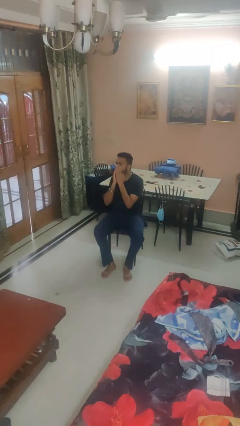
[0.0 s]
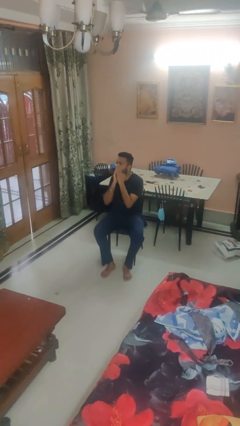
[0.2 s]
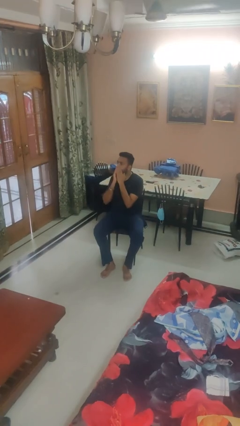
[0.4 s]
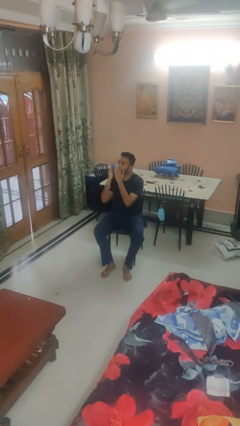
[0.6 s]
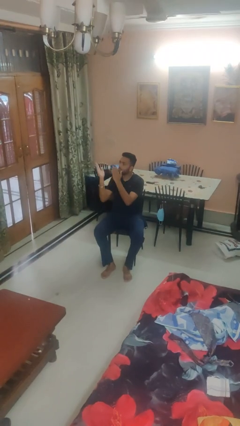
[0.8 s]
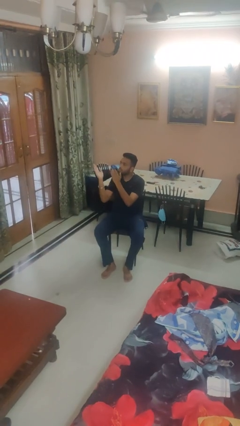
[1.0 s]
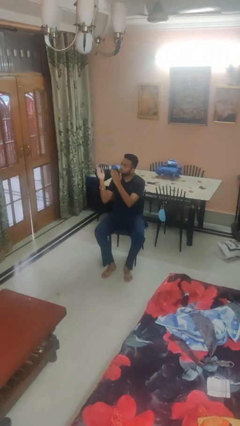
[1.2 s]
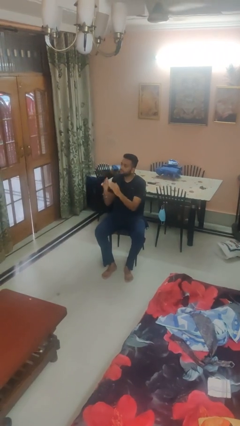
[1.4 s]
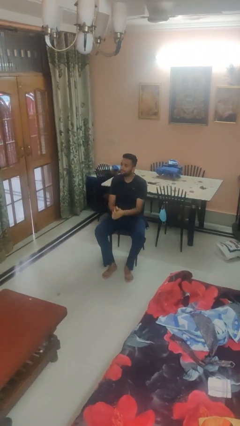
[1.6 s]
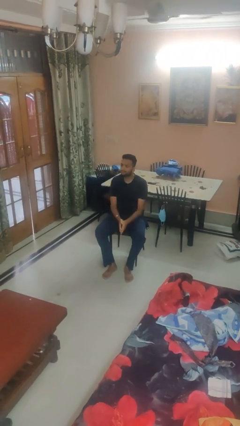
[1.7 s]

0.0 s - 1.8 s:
person gestures blow kiss

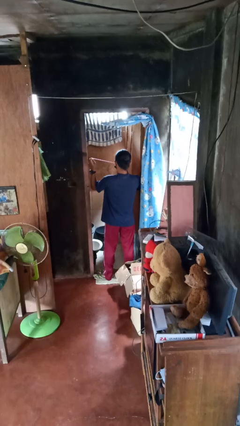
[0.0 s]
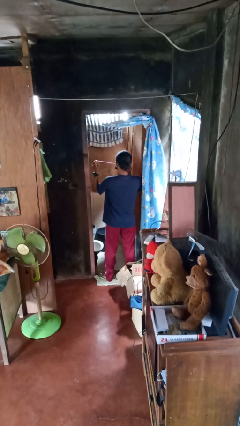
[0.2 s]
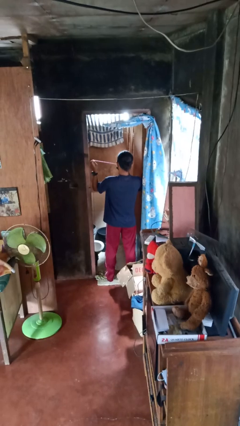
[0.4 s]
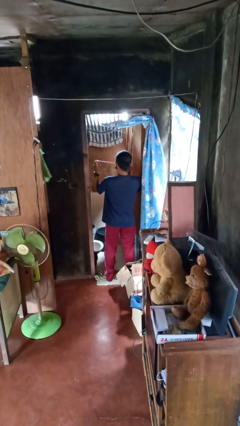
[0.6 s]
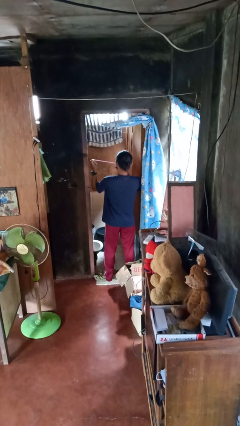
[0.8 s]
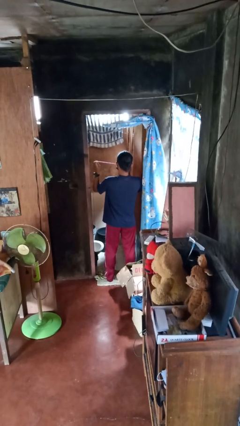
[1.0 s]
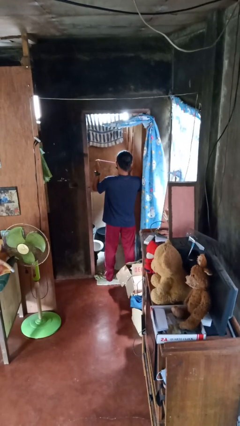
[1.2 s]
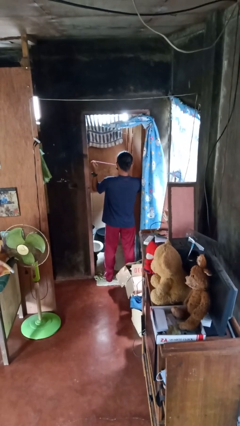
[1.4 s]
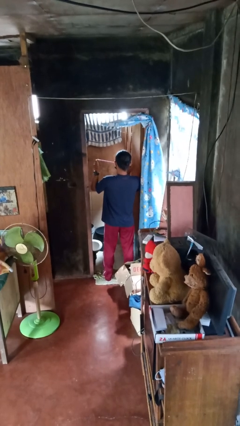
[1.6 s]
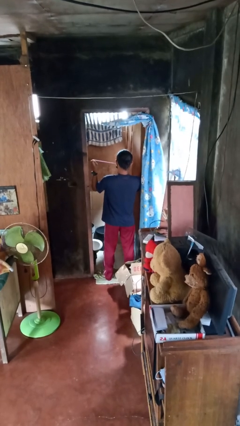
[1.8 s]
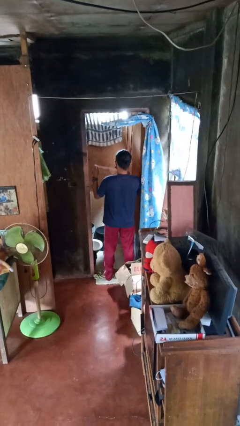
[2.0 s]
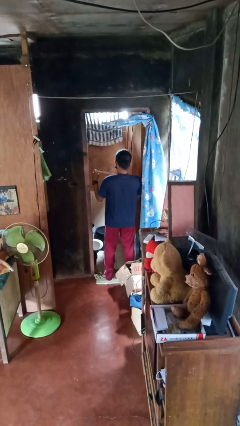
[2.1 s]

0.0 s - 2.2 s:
person flosses

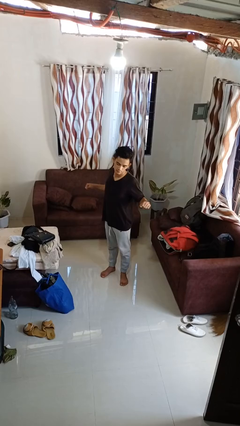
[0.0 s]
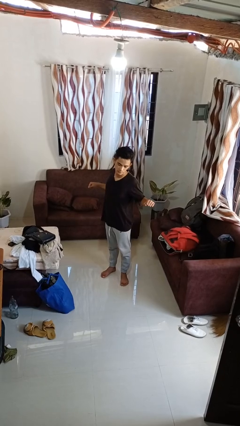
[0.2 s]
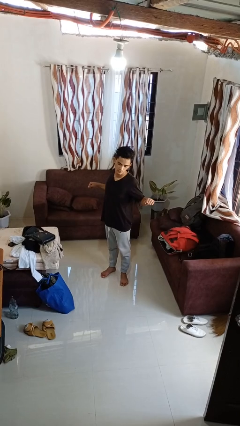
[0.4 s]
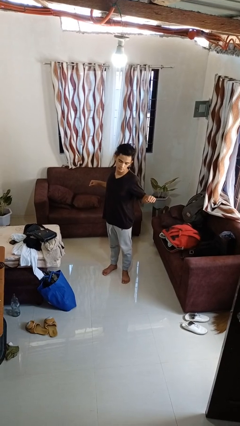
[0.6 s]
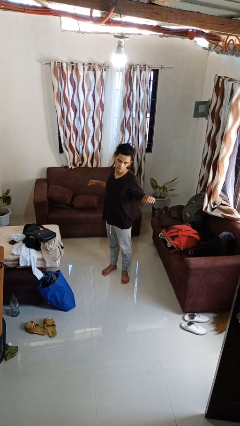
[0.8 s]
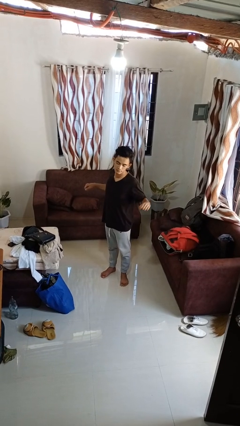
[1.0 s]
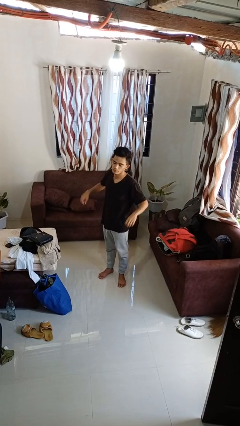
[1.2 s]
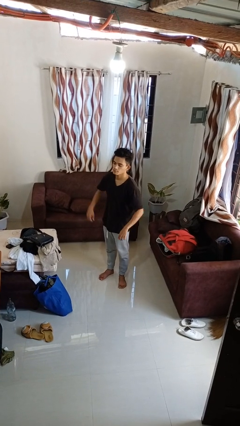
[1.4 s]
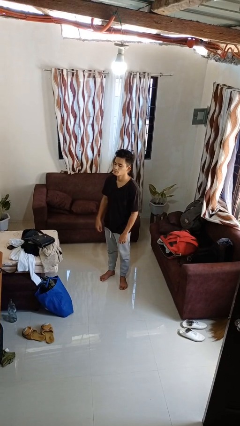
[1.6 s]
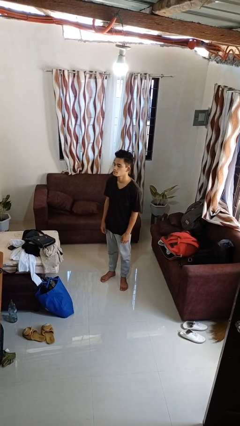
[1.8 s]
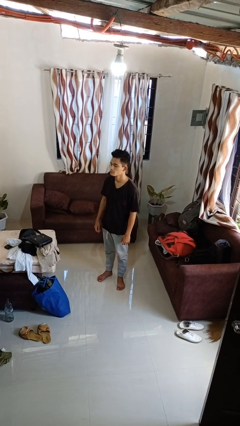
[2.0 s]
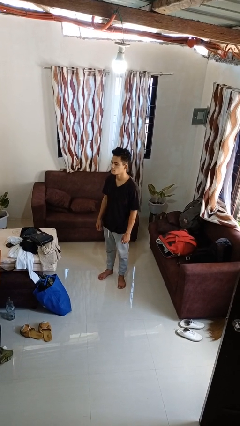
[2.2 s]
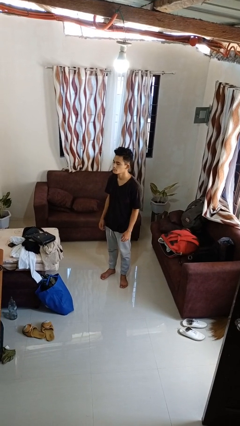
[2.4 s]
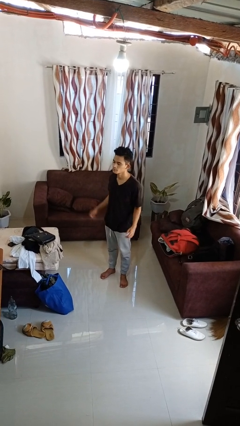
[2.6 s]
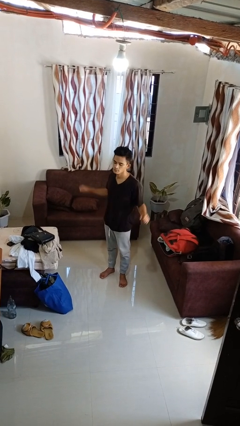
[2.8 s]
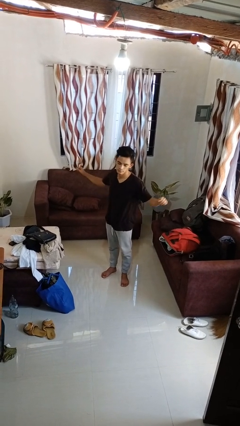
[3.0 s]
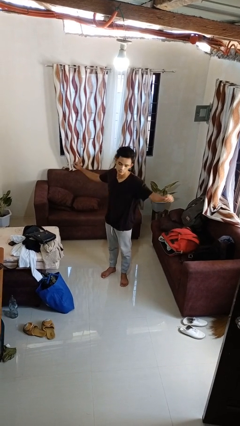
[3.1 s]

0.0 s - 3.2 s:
person stretches back

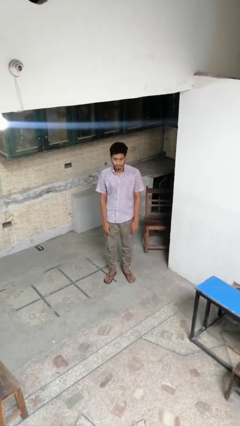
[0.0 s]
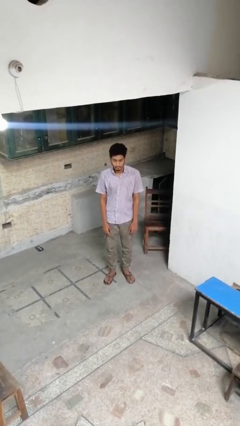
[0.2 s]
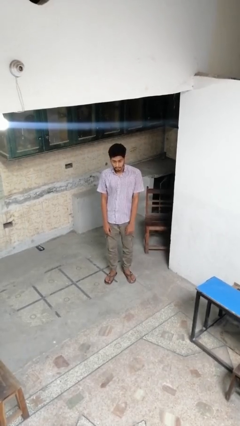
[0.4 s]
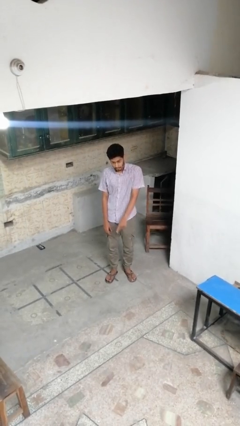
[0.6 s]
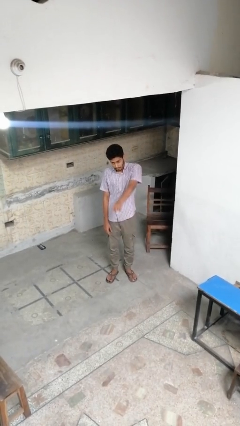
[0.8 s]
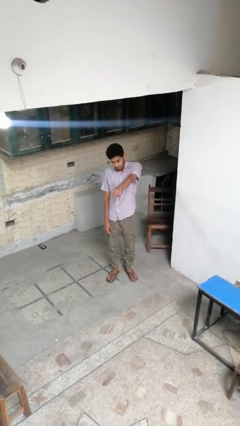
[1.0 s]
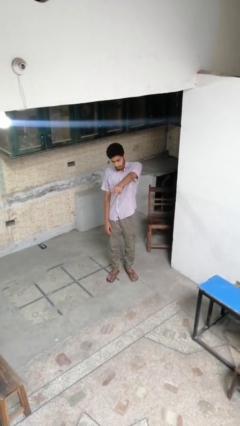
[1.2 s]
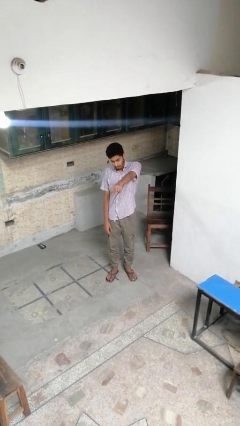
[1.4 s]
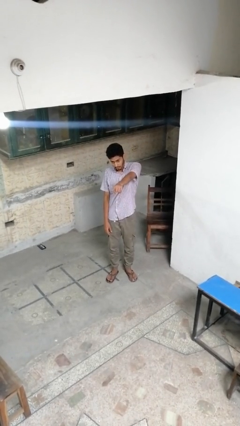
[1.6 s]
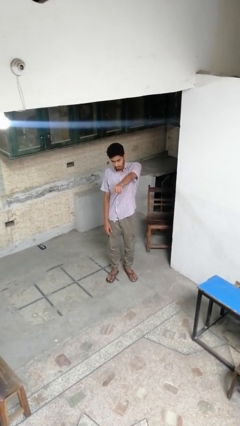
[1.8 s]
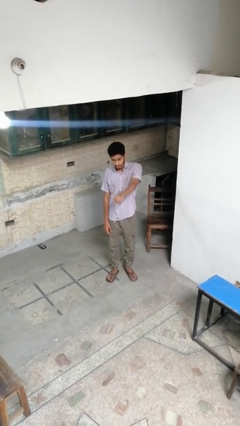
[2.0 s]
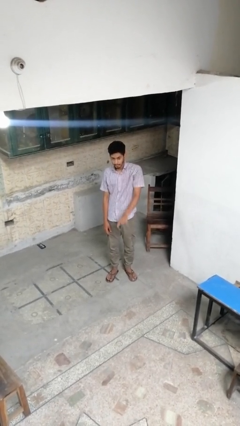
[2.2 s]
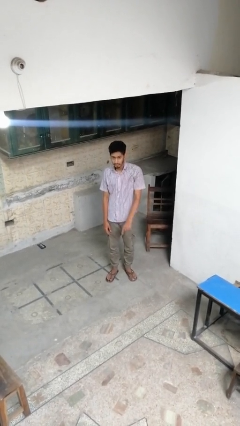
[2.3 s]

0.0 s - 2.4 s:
person points at person

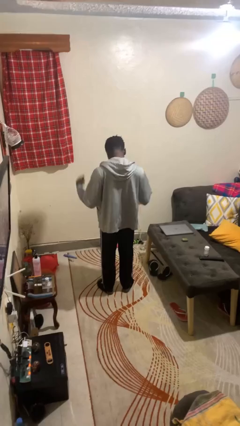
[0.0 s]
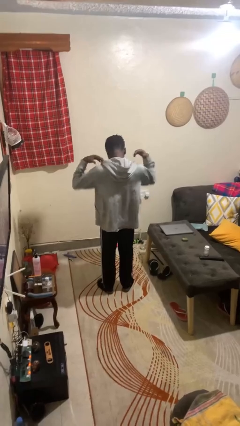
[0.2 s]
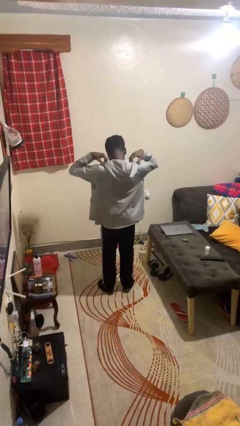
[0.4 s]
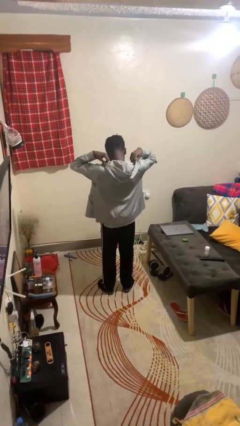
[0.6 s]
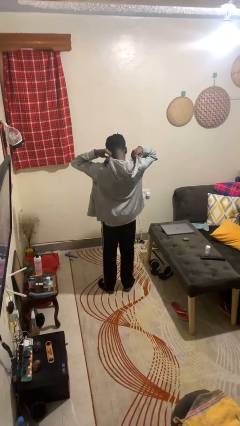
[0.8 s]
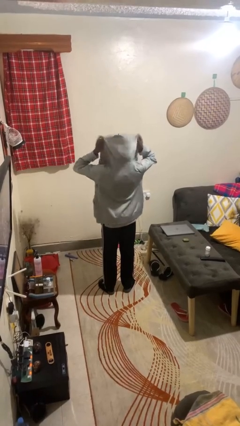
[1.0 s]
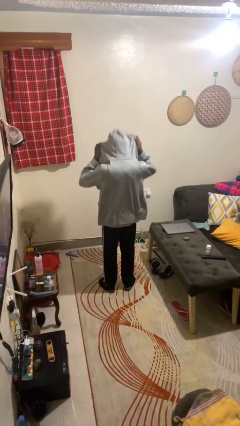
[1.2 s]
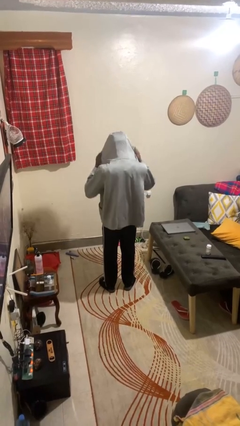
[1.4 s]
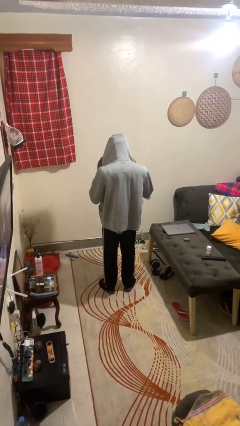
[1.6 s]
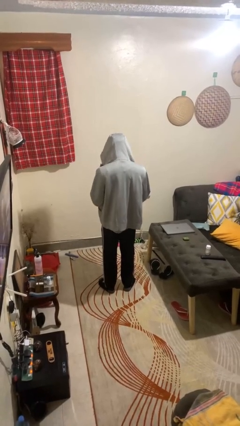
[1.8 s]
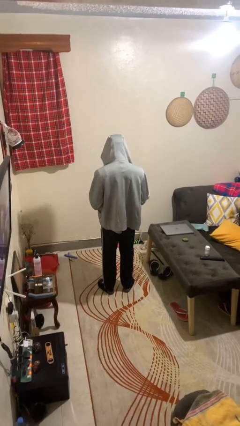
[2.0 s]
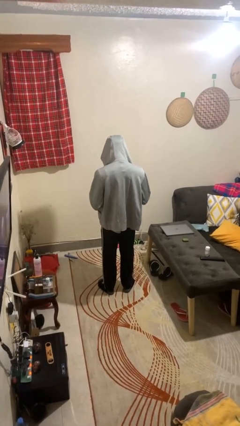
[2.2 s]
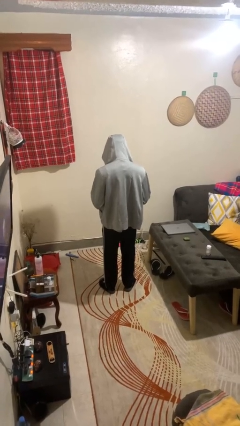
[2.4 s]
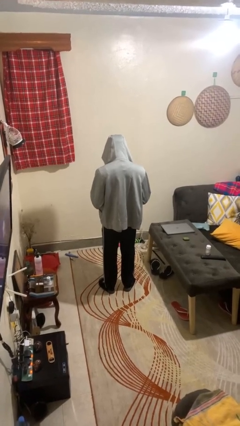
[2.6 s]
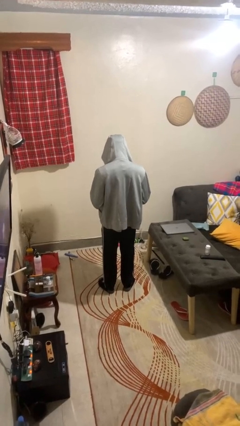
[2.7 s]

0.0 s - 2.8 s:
person puts on hoodie

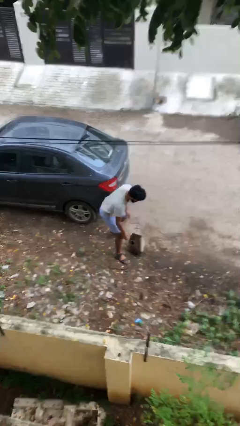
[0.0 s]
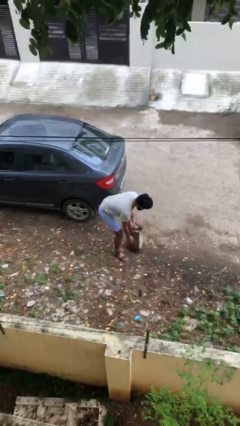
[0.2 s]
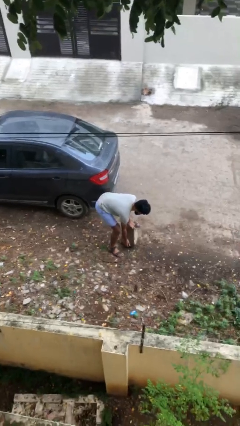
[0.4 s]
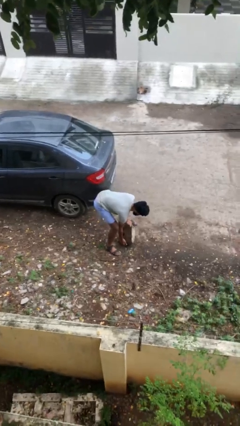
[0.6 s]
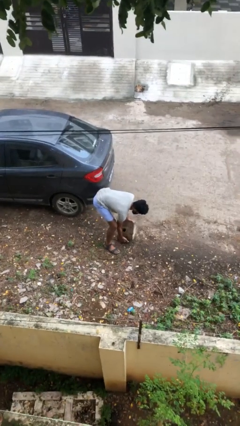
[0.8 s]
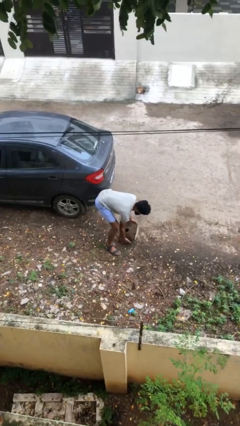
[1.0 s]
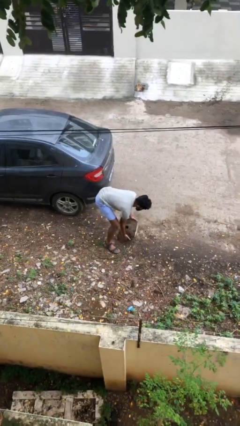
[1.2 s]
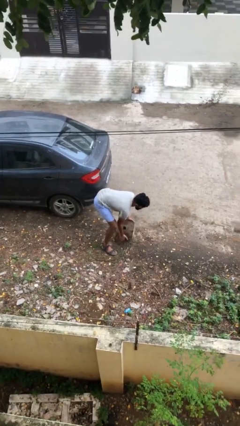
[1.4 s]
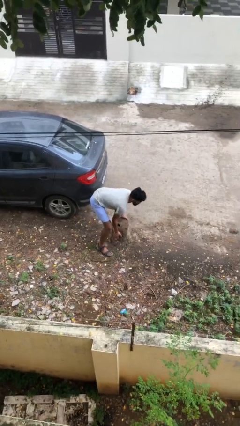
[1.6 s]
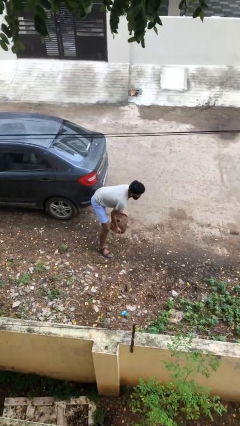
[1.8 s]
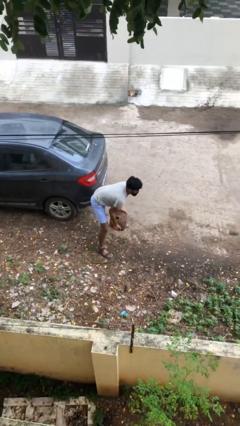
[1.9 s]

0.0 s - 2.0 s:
person picks up object from floor

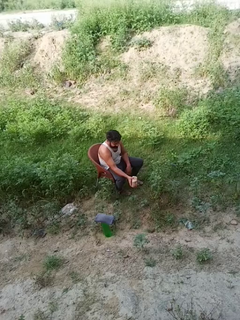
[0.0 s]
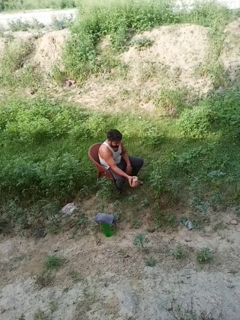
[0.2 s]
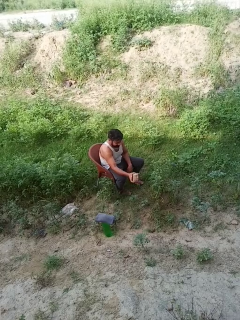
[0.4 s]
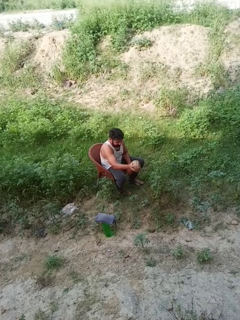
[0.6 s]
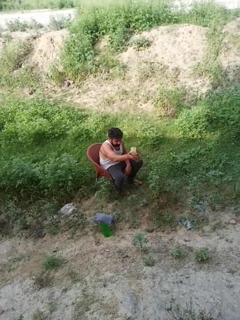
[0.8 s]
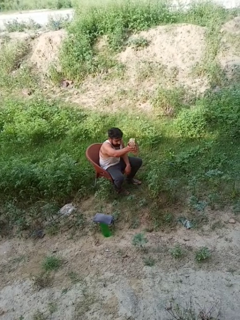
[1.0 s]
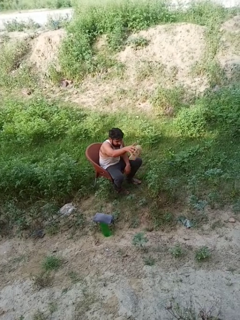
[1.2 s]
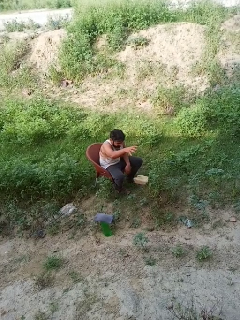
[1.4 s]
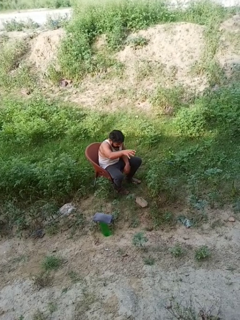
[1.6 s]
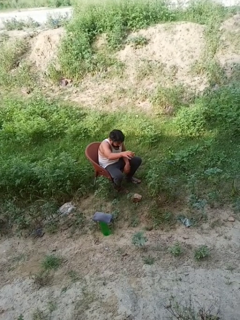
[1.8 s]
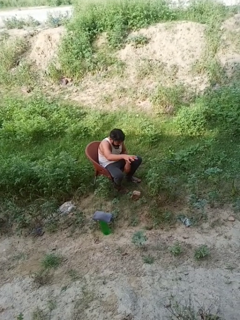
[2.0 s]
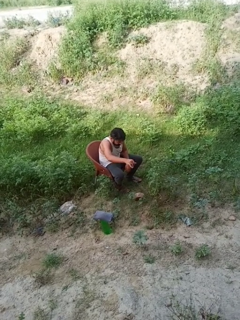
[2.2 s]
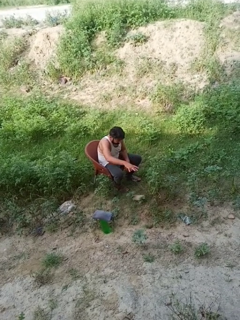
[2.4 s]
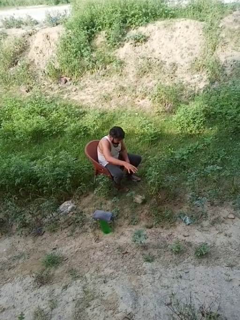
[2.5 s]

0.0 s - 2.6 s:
person throws object to ground

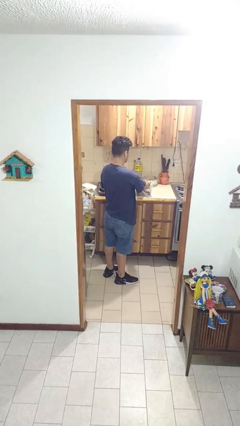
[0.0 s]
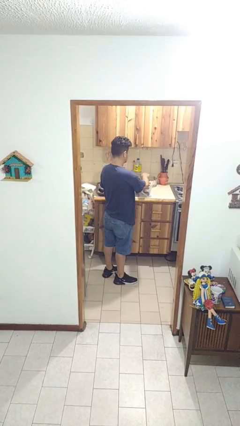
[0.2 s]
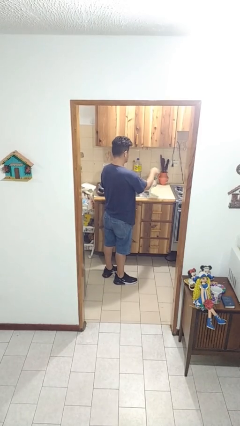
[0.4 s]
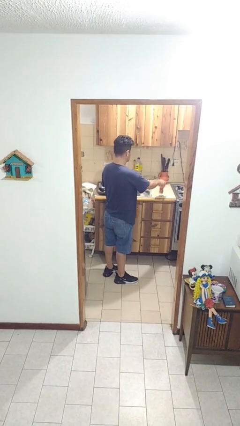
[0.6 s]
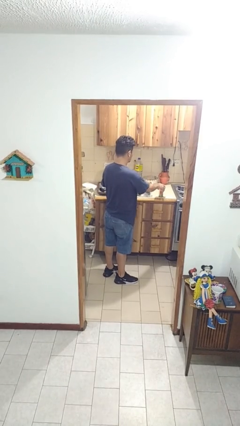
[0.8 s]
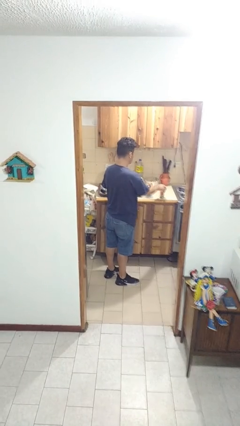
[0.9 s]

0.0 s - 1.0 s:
person takes object from bag
